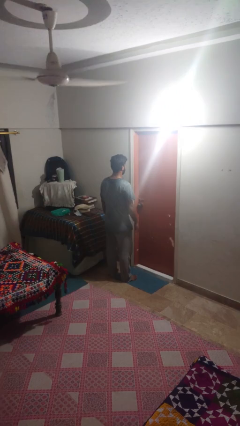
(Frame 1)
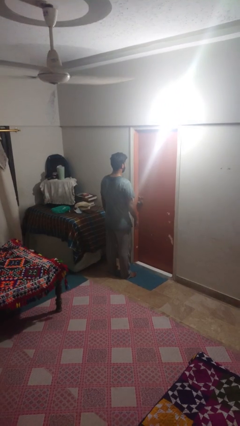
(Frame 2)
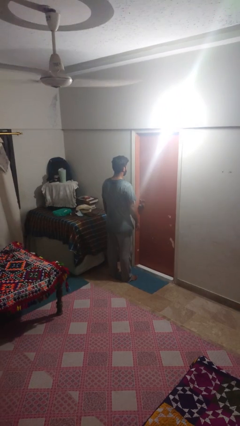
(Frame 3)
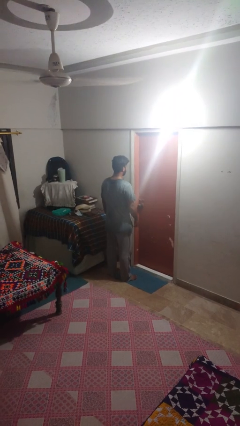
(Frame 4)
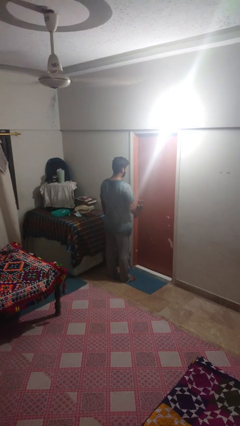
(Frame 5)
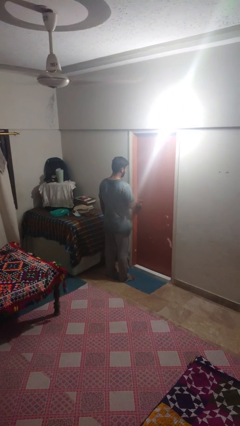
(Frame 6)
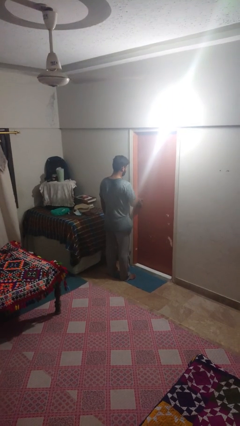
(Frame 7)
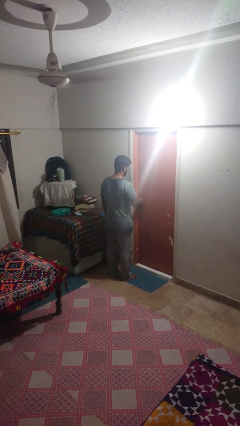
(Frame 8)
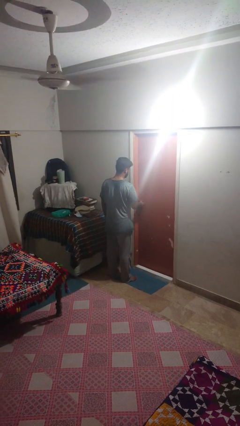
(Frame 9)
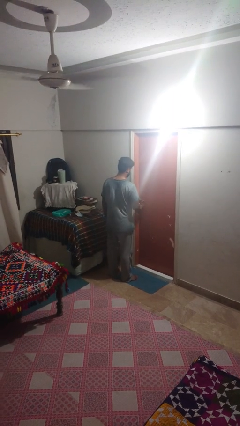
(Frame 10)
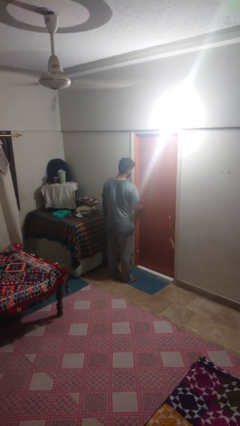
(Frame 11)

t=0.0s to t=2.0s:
person unlocks door with keys

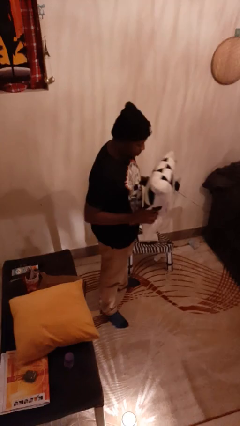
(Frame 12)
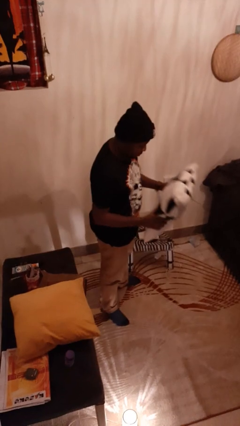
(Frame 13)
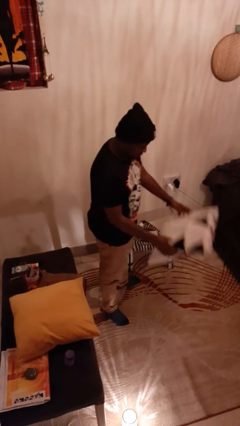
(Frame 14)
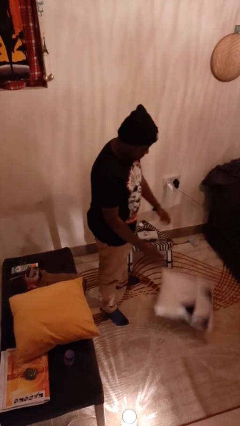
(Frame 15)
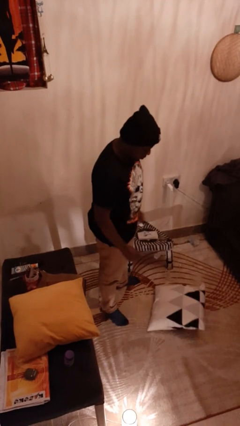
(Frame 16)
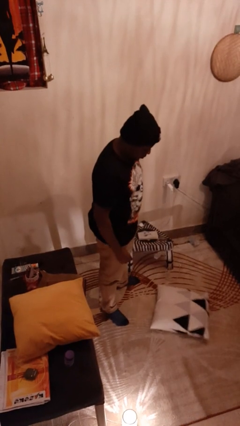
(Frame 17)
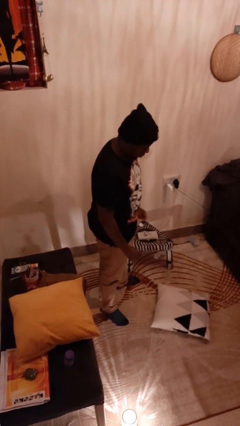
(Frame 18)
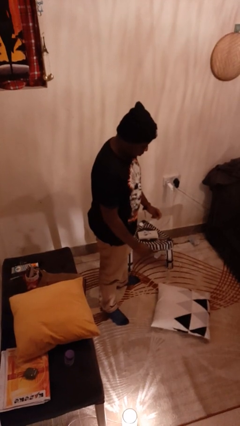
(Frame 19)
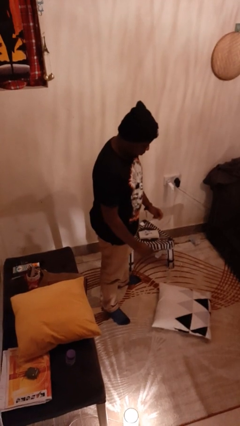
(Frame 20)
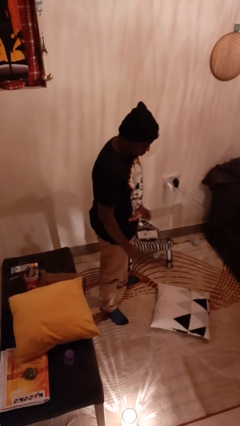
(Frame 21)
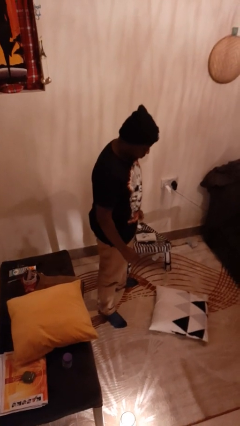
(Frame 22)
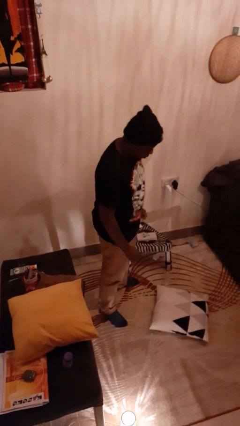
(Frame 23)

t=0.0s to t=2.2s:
person drops object

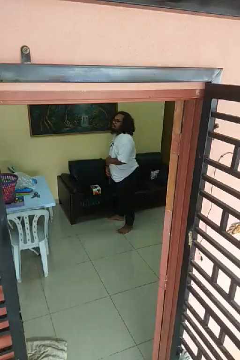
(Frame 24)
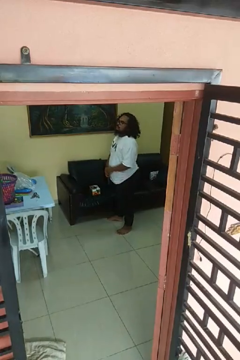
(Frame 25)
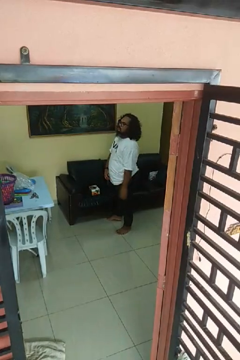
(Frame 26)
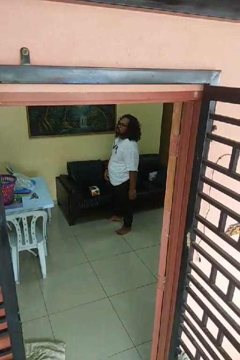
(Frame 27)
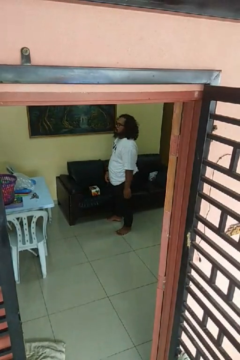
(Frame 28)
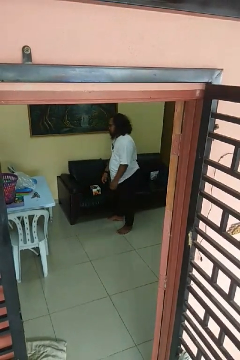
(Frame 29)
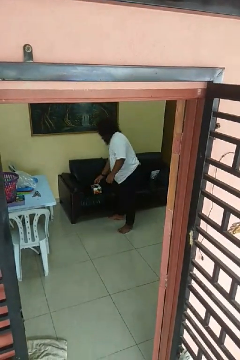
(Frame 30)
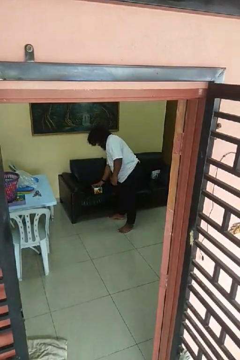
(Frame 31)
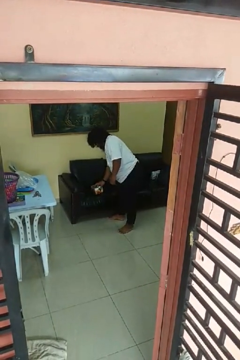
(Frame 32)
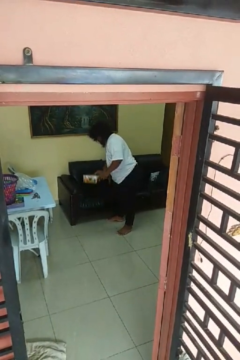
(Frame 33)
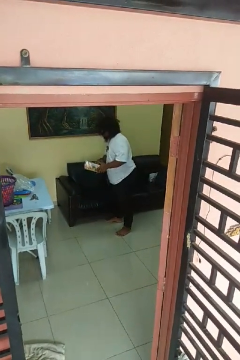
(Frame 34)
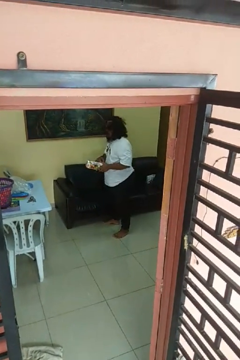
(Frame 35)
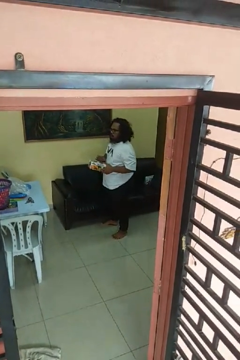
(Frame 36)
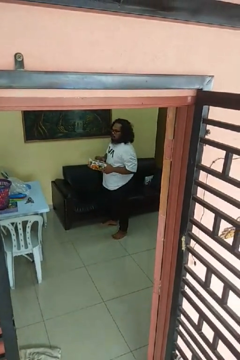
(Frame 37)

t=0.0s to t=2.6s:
person picks up object from couch

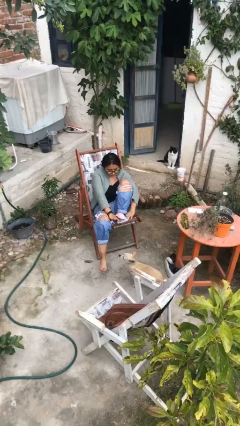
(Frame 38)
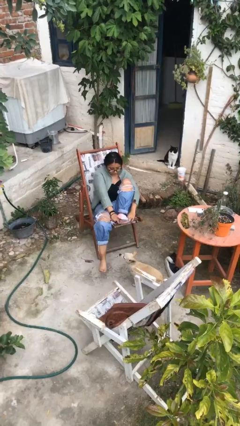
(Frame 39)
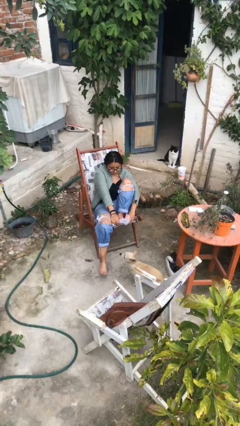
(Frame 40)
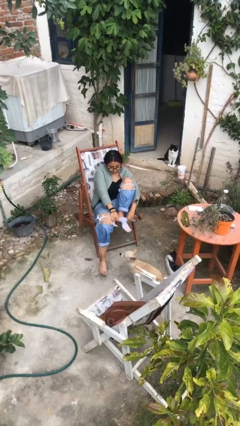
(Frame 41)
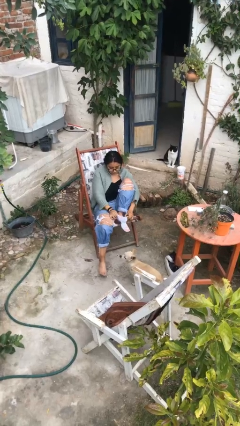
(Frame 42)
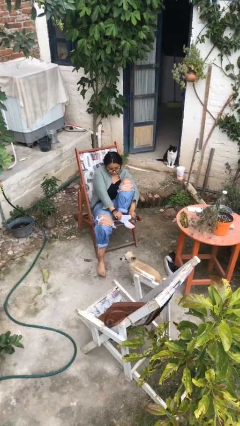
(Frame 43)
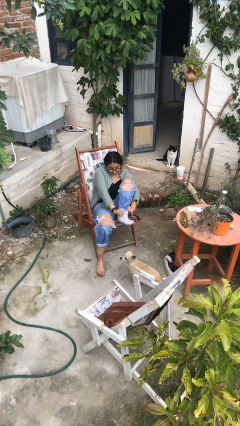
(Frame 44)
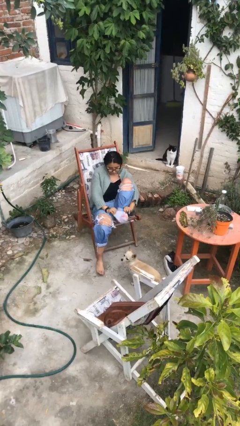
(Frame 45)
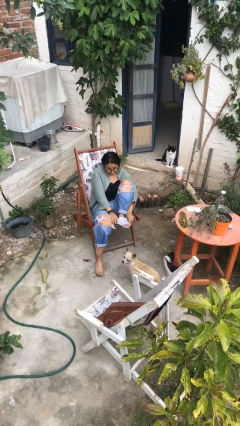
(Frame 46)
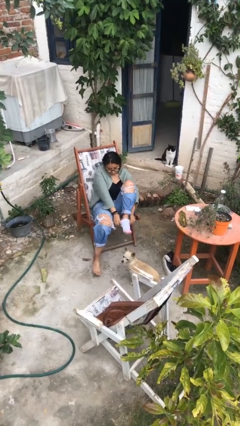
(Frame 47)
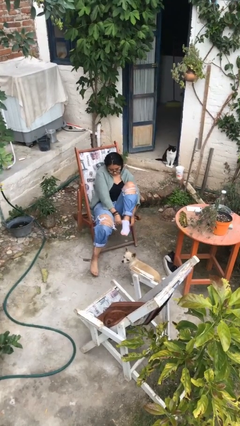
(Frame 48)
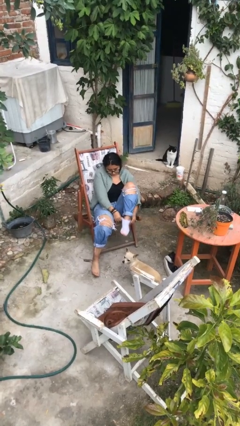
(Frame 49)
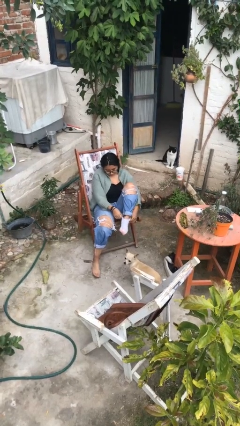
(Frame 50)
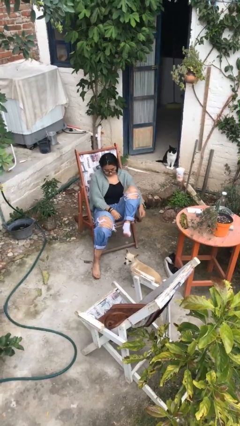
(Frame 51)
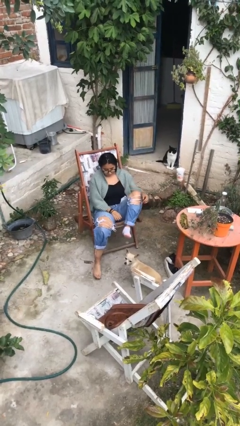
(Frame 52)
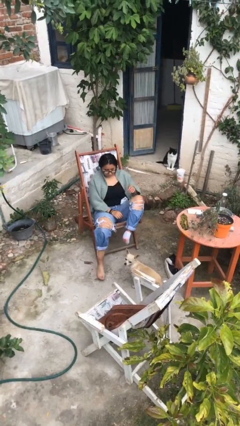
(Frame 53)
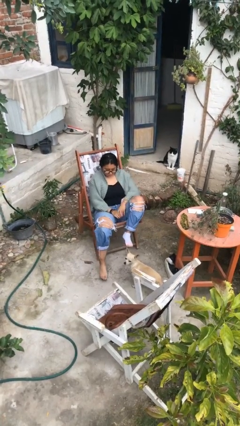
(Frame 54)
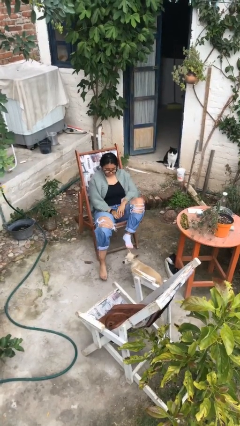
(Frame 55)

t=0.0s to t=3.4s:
person puts on socks

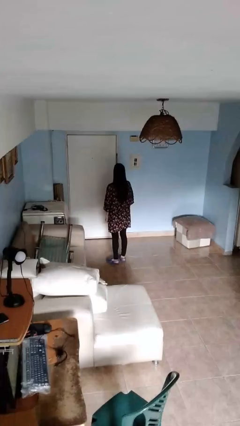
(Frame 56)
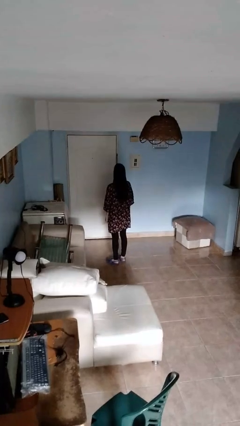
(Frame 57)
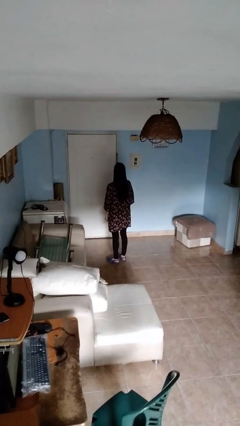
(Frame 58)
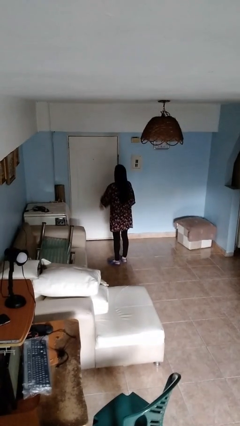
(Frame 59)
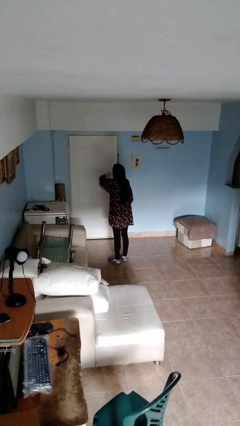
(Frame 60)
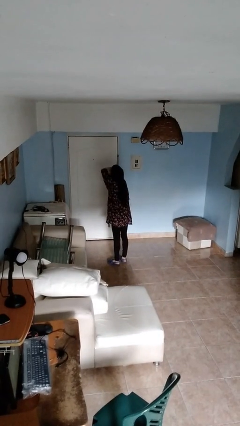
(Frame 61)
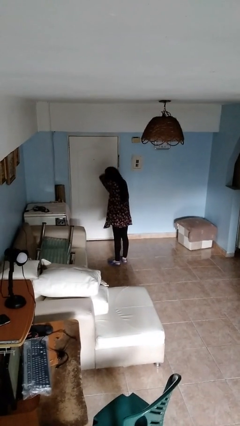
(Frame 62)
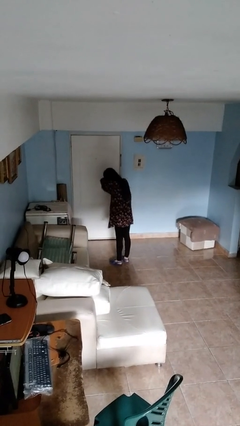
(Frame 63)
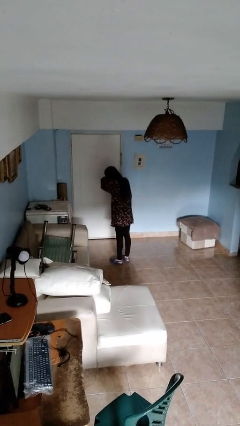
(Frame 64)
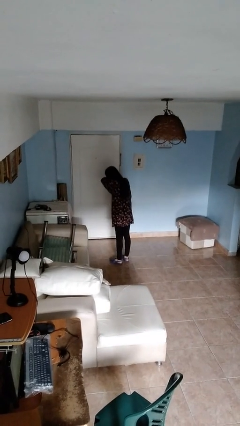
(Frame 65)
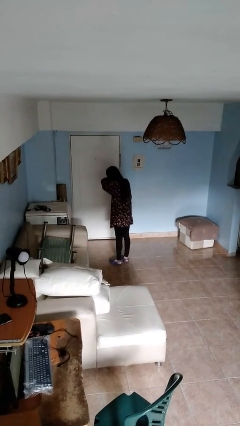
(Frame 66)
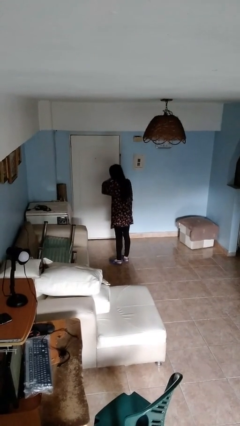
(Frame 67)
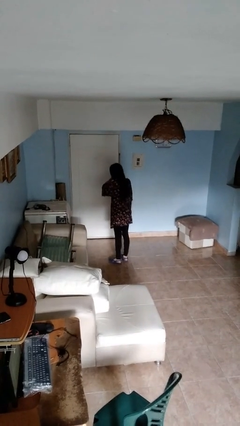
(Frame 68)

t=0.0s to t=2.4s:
person sneezes into arm

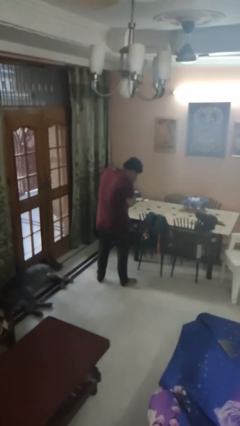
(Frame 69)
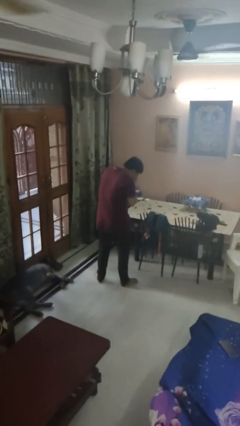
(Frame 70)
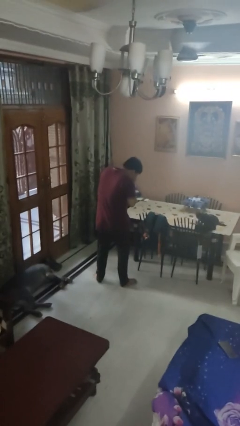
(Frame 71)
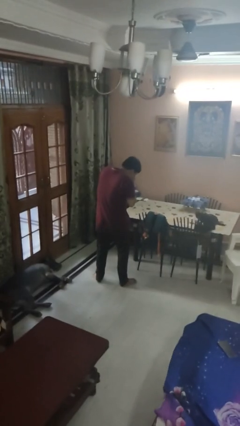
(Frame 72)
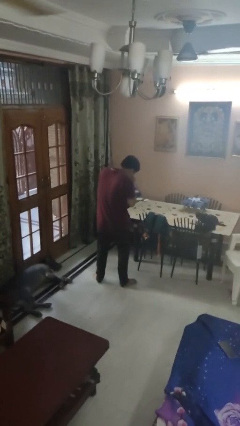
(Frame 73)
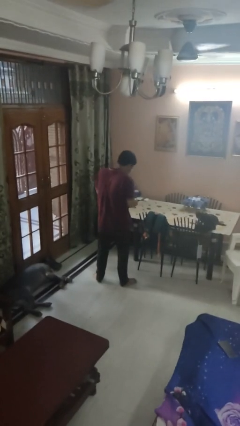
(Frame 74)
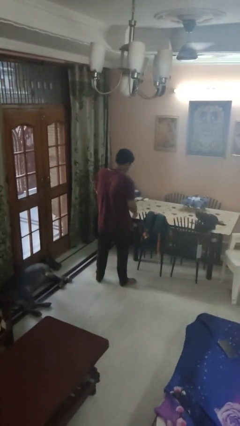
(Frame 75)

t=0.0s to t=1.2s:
person sneezes into hand

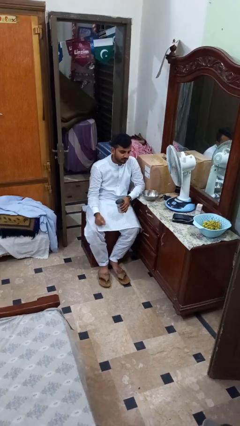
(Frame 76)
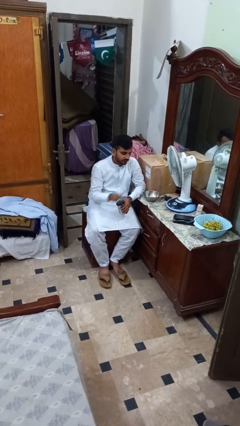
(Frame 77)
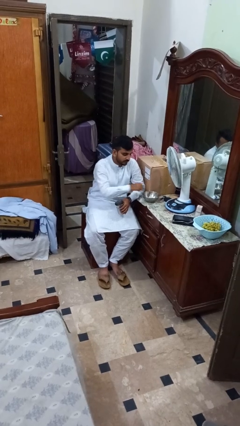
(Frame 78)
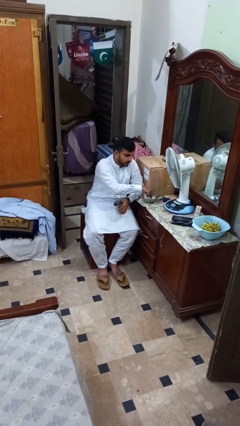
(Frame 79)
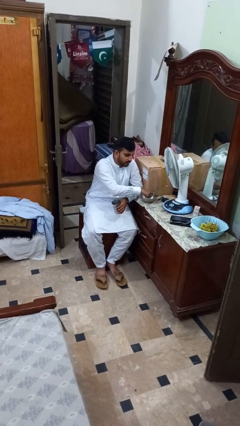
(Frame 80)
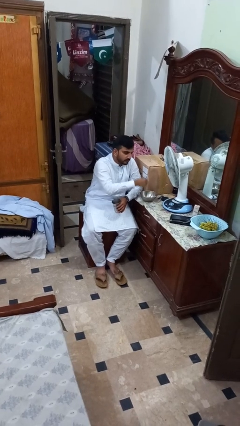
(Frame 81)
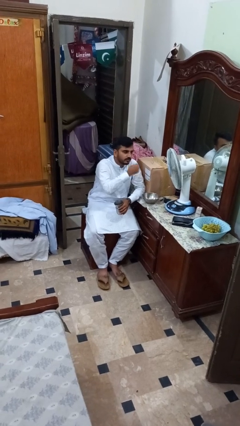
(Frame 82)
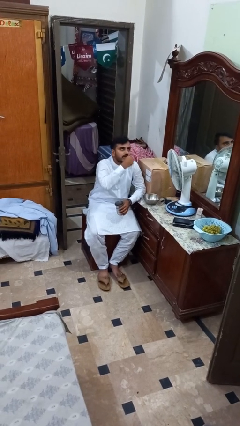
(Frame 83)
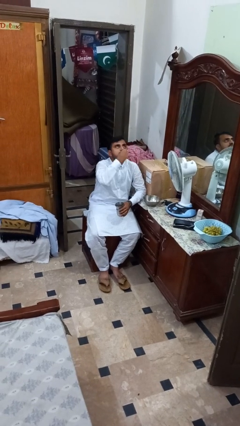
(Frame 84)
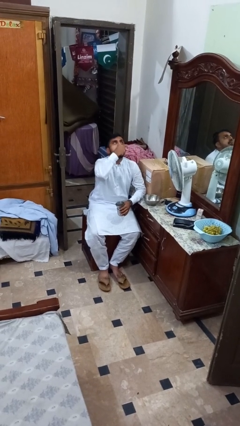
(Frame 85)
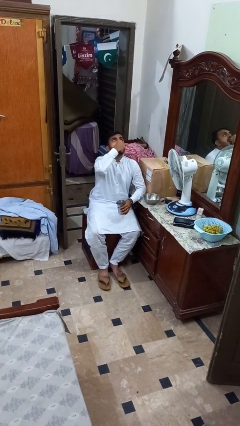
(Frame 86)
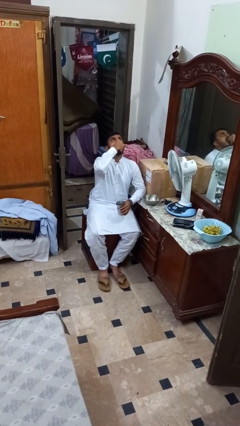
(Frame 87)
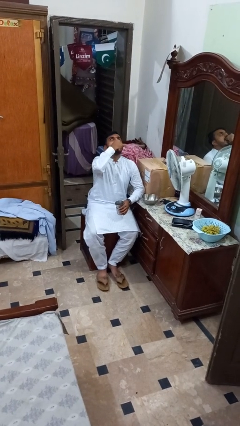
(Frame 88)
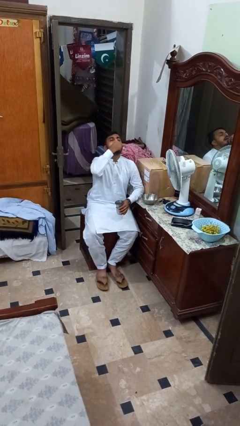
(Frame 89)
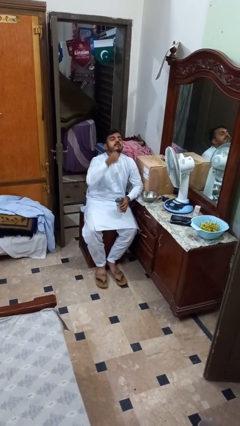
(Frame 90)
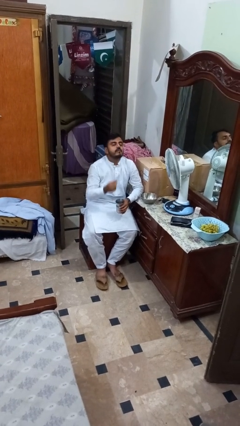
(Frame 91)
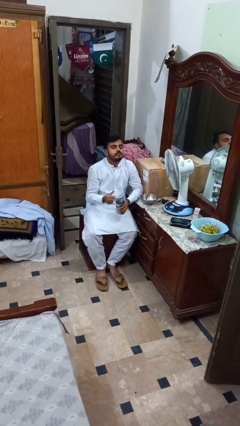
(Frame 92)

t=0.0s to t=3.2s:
person takes medicine pills

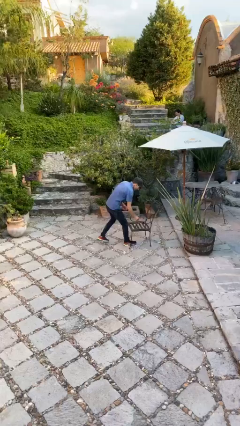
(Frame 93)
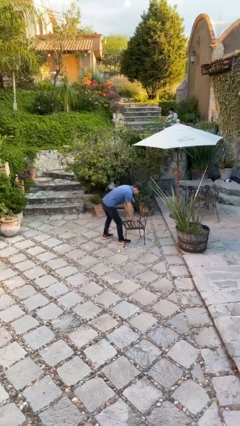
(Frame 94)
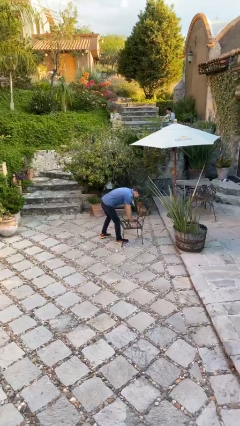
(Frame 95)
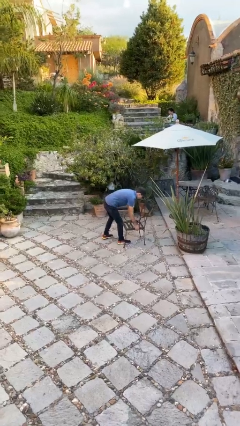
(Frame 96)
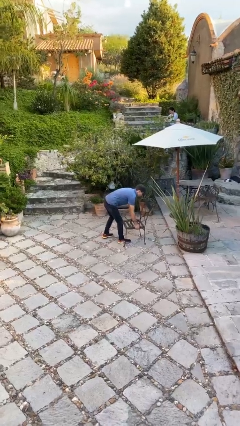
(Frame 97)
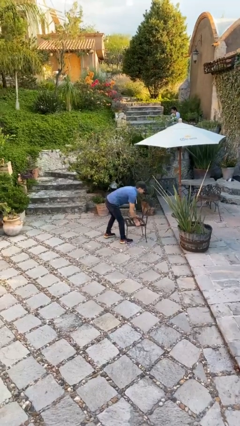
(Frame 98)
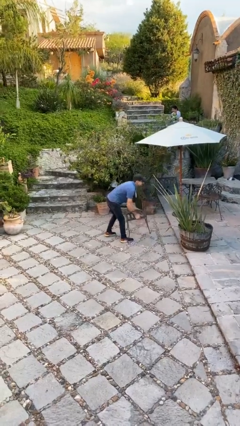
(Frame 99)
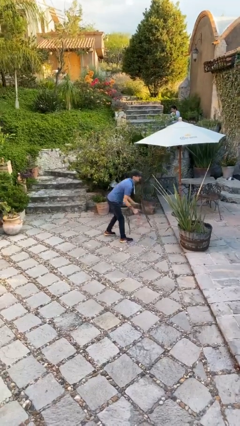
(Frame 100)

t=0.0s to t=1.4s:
person picks up object from floor
